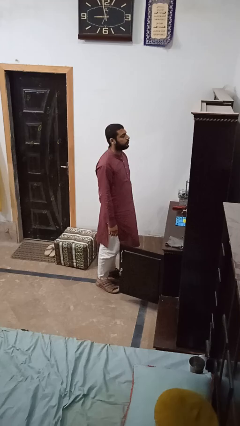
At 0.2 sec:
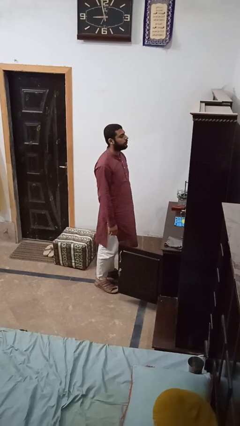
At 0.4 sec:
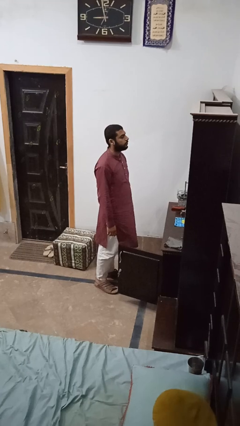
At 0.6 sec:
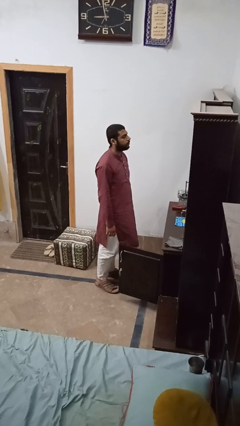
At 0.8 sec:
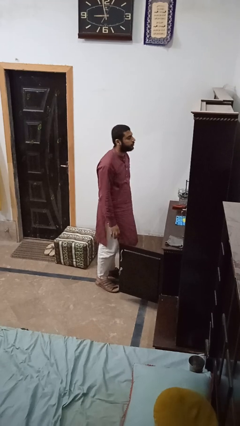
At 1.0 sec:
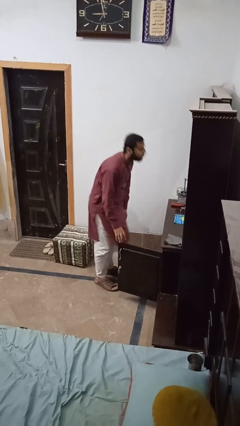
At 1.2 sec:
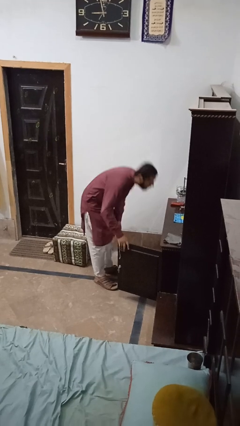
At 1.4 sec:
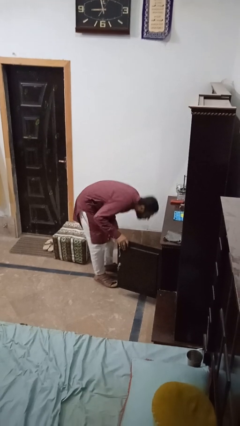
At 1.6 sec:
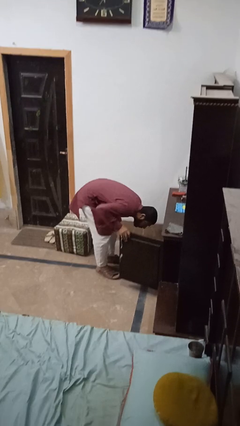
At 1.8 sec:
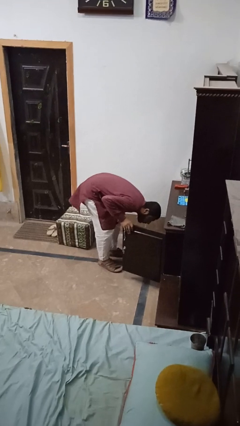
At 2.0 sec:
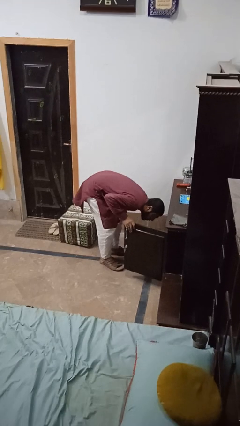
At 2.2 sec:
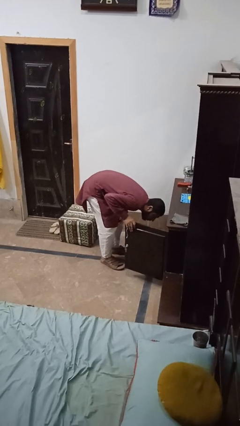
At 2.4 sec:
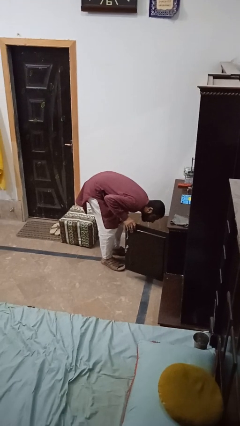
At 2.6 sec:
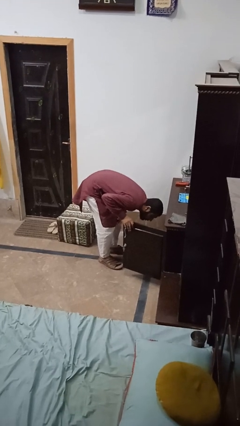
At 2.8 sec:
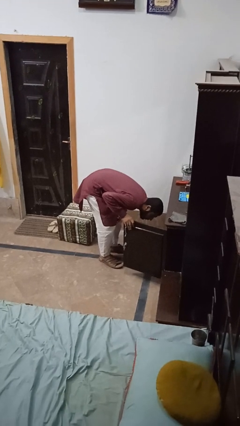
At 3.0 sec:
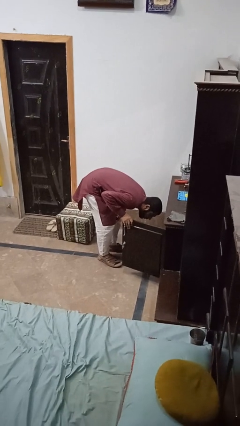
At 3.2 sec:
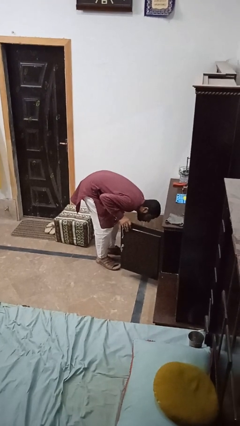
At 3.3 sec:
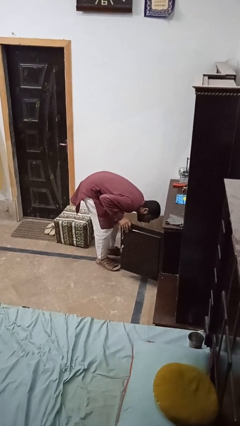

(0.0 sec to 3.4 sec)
person searches in cabinet

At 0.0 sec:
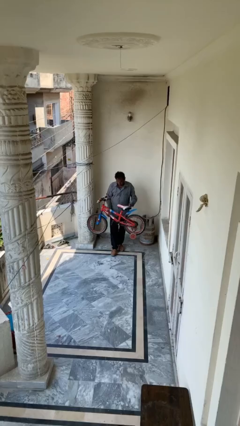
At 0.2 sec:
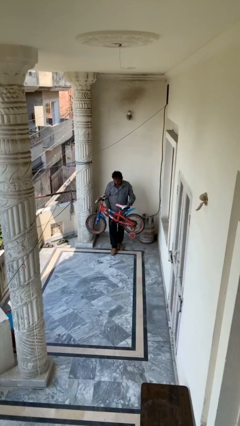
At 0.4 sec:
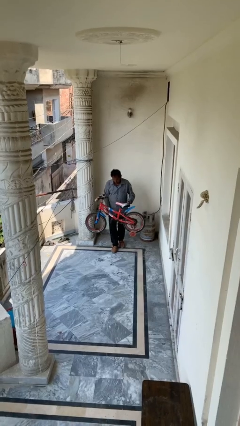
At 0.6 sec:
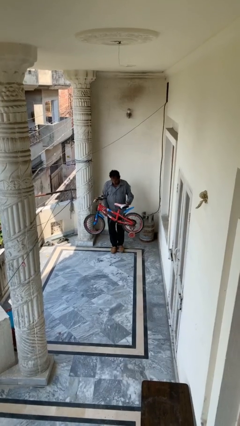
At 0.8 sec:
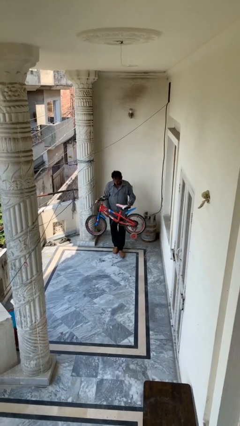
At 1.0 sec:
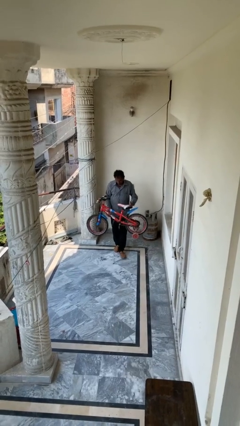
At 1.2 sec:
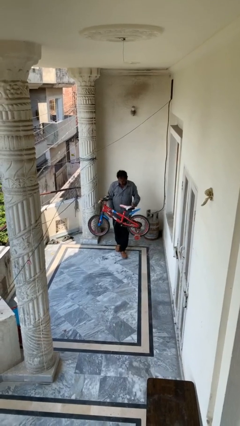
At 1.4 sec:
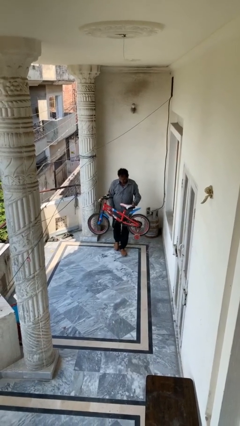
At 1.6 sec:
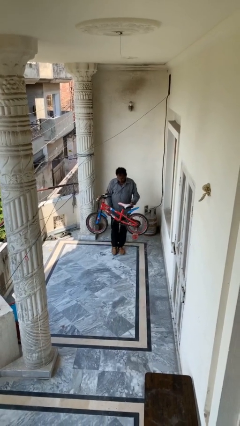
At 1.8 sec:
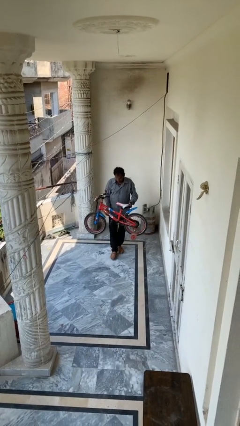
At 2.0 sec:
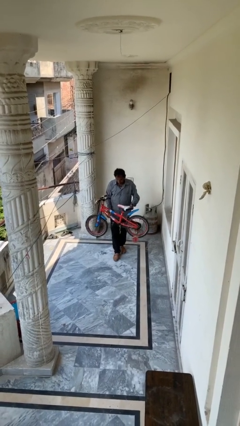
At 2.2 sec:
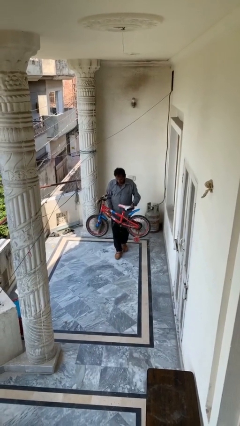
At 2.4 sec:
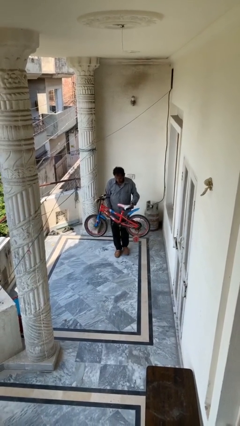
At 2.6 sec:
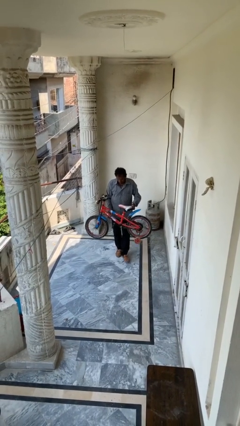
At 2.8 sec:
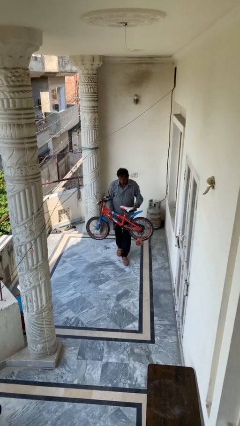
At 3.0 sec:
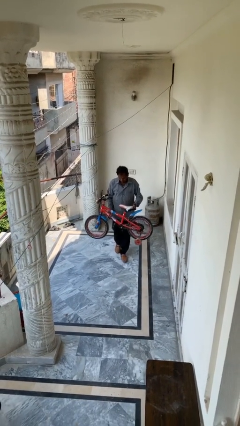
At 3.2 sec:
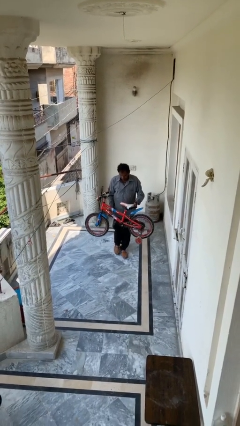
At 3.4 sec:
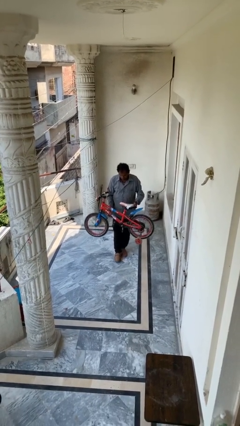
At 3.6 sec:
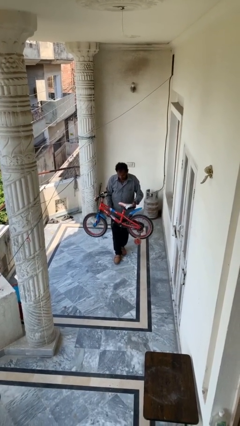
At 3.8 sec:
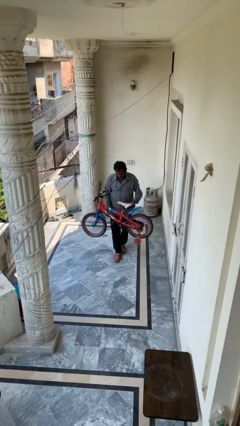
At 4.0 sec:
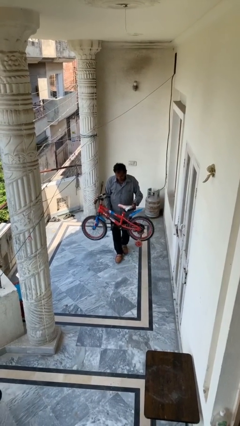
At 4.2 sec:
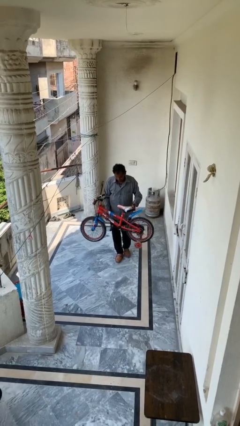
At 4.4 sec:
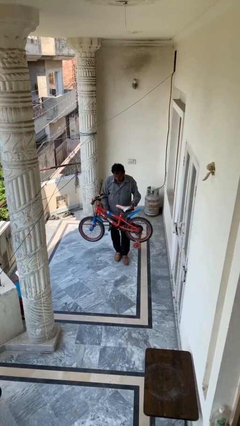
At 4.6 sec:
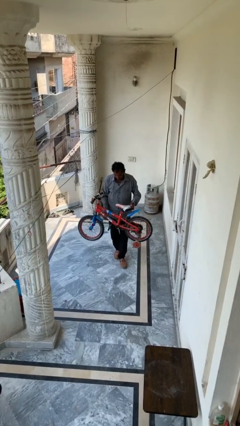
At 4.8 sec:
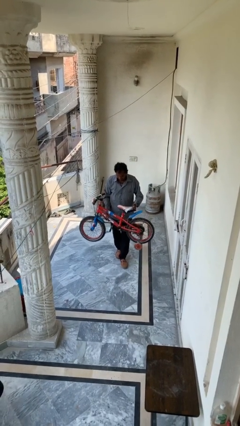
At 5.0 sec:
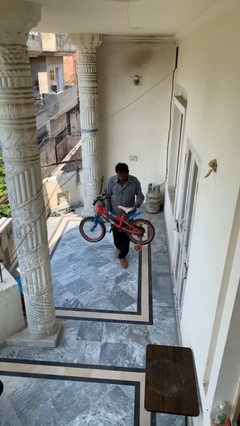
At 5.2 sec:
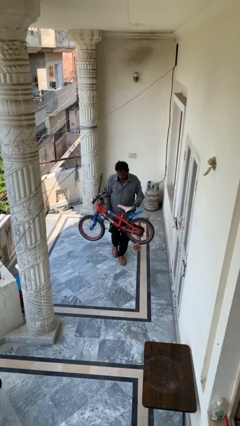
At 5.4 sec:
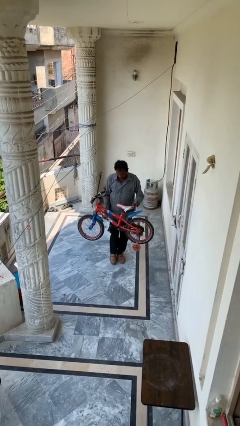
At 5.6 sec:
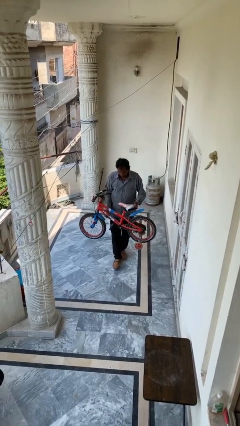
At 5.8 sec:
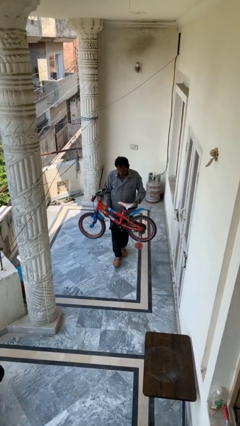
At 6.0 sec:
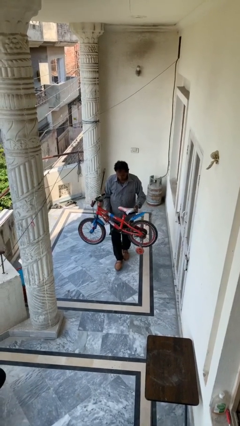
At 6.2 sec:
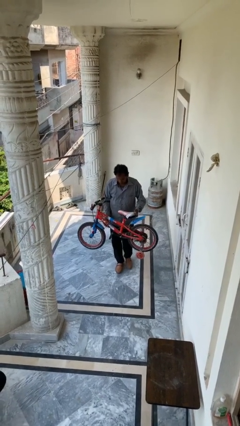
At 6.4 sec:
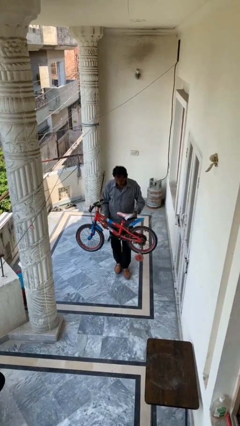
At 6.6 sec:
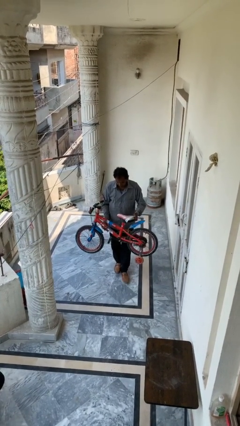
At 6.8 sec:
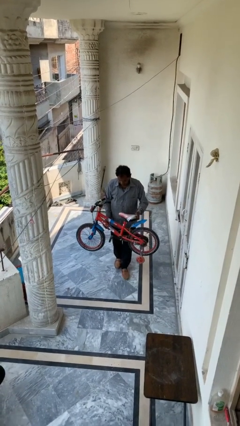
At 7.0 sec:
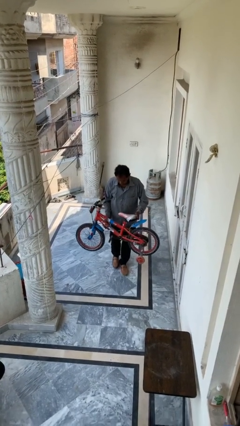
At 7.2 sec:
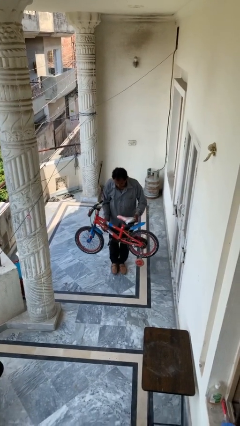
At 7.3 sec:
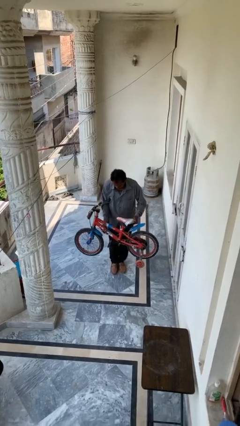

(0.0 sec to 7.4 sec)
person carries heavy object

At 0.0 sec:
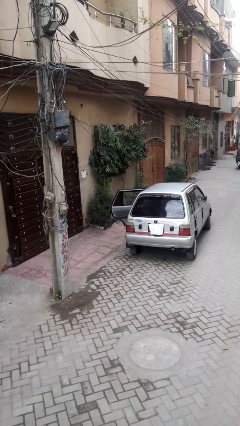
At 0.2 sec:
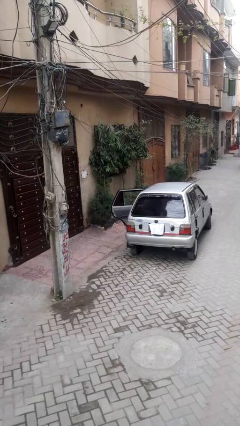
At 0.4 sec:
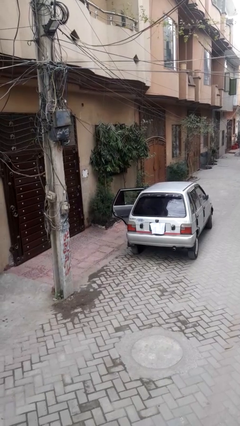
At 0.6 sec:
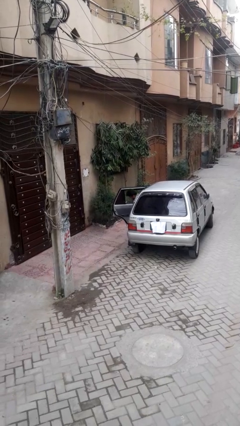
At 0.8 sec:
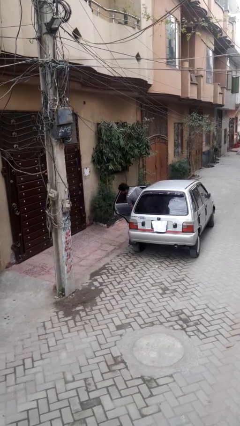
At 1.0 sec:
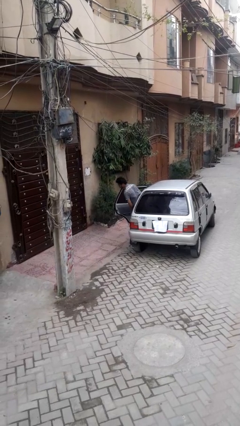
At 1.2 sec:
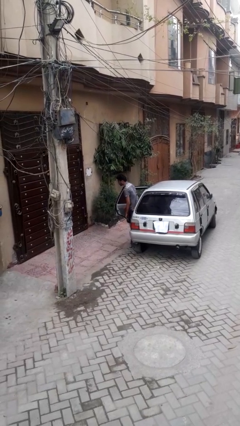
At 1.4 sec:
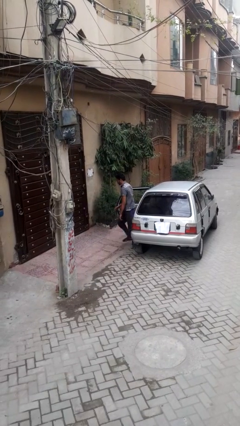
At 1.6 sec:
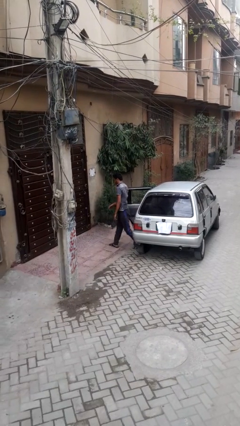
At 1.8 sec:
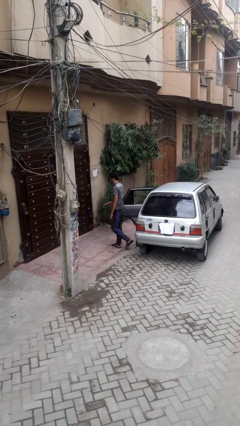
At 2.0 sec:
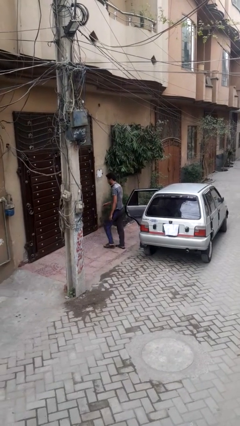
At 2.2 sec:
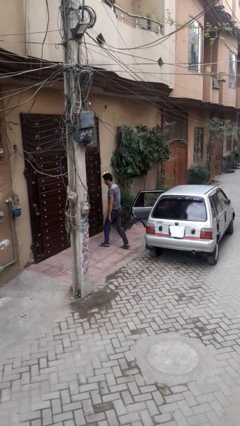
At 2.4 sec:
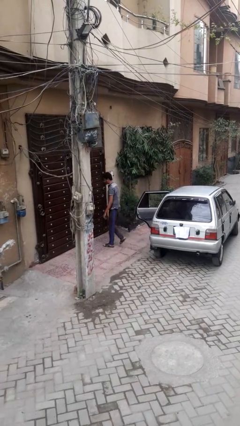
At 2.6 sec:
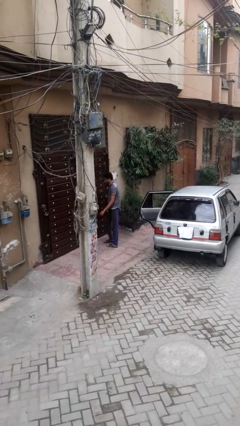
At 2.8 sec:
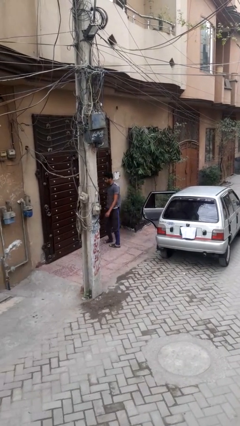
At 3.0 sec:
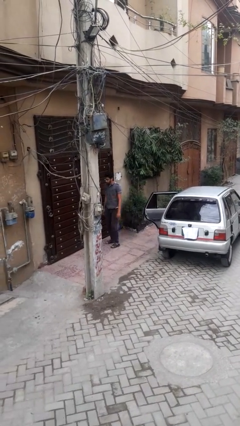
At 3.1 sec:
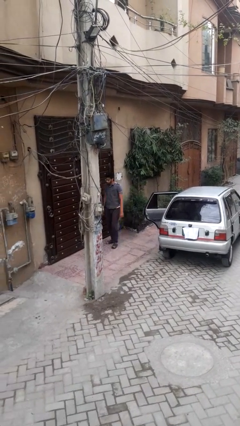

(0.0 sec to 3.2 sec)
person exits car

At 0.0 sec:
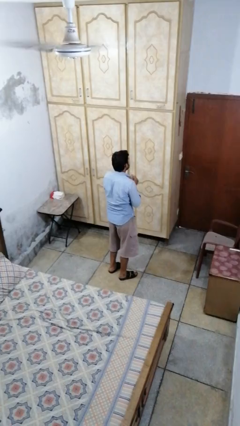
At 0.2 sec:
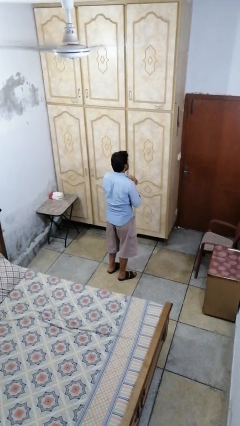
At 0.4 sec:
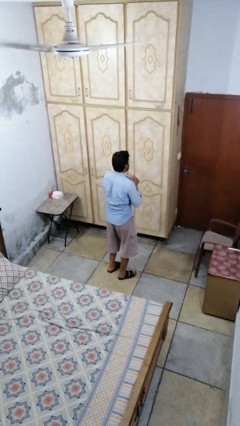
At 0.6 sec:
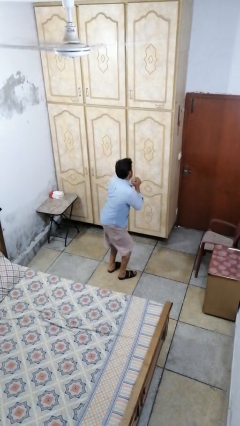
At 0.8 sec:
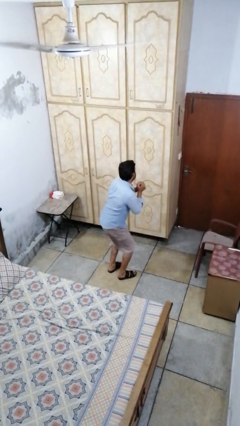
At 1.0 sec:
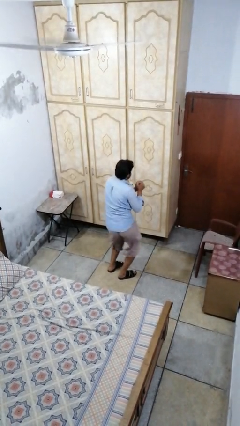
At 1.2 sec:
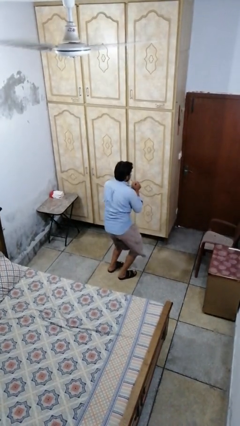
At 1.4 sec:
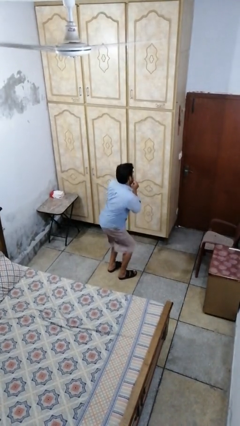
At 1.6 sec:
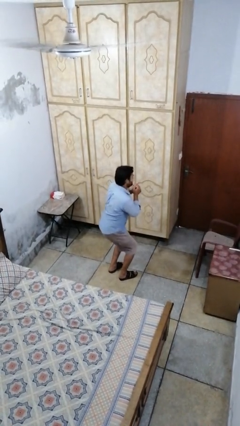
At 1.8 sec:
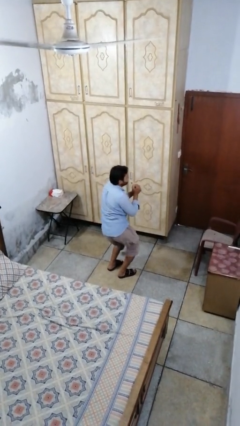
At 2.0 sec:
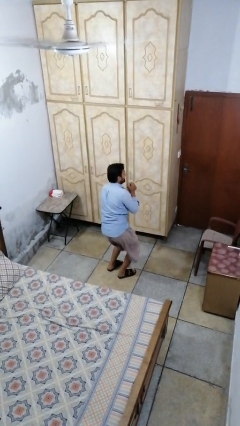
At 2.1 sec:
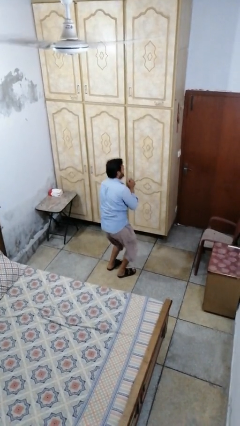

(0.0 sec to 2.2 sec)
person wiggles hips

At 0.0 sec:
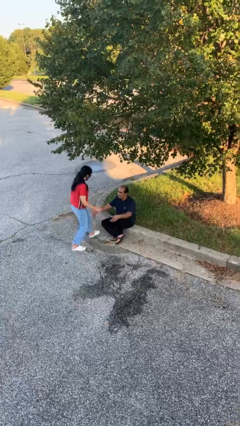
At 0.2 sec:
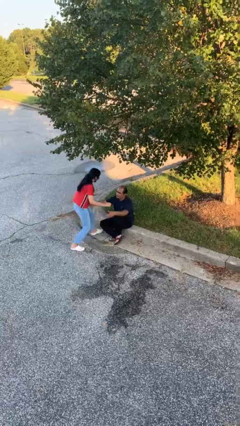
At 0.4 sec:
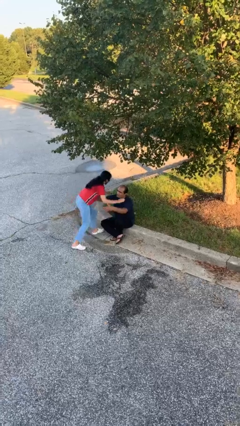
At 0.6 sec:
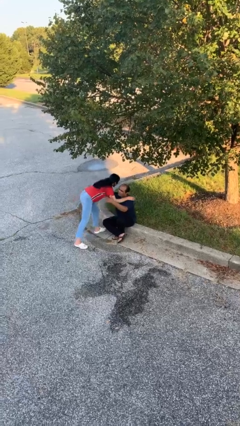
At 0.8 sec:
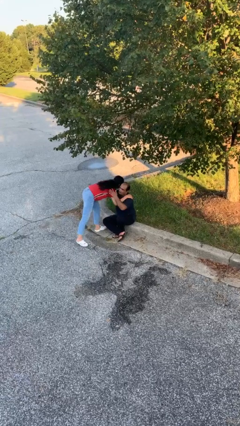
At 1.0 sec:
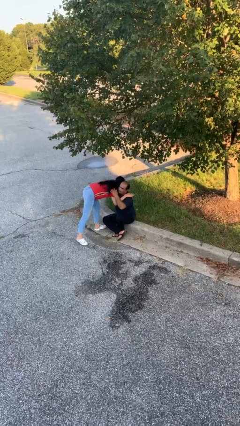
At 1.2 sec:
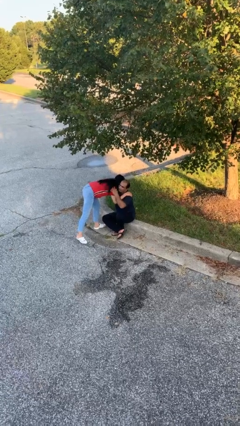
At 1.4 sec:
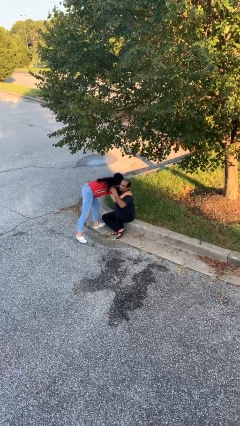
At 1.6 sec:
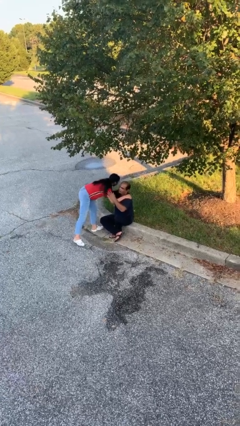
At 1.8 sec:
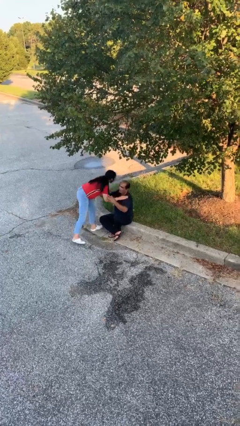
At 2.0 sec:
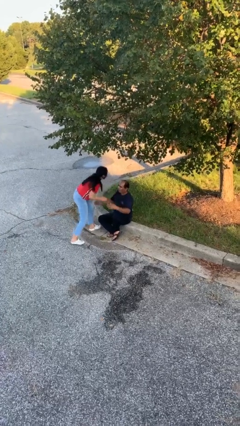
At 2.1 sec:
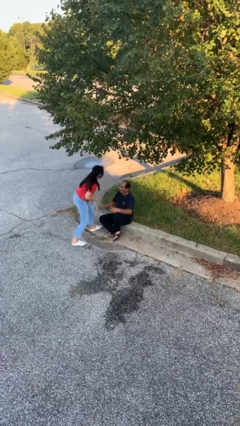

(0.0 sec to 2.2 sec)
person embraces person
